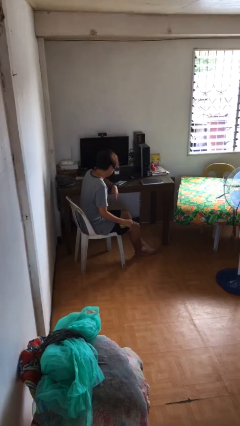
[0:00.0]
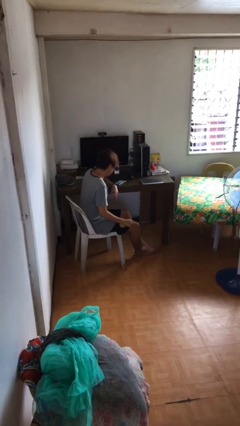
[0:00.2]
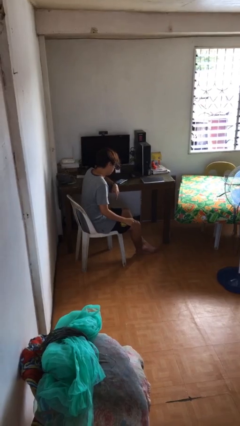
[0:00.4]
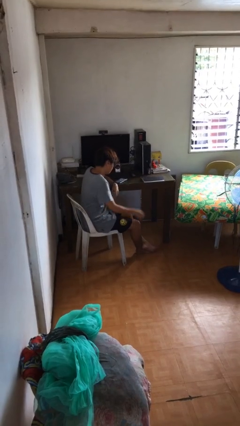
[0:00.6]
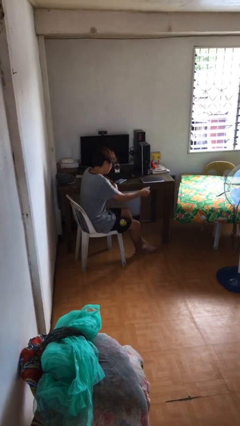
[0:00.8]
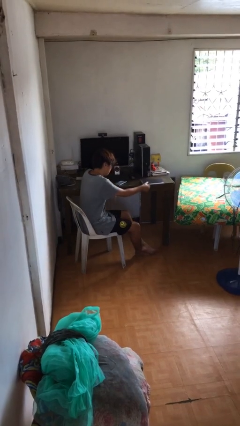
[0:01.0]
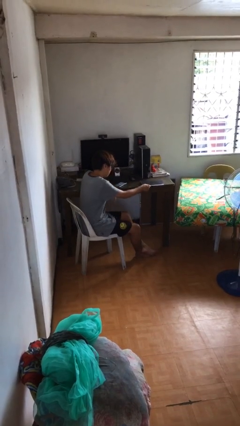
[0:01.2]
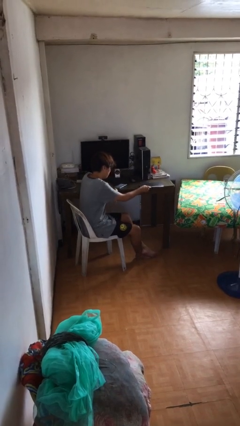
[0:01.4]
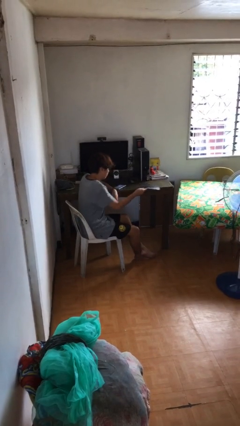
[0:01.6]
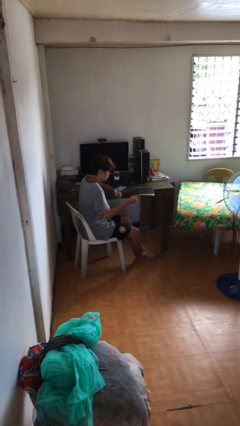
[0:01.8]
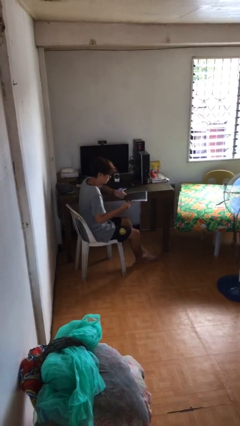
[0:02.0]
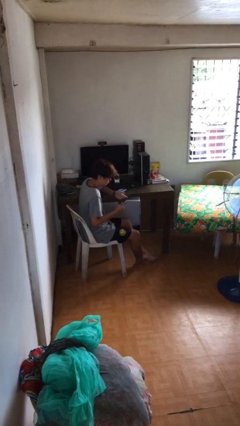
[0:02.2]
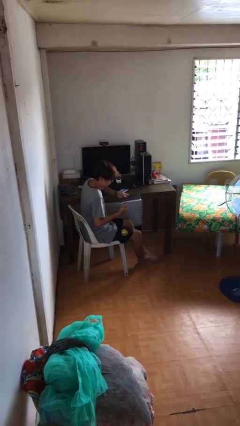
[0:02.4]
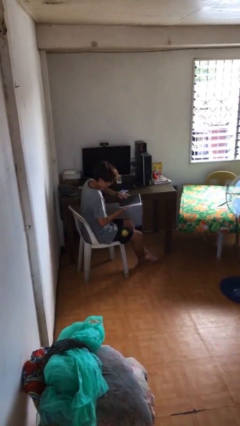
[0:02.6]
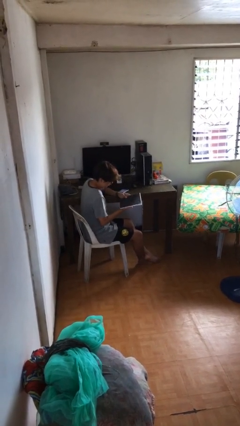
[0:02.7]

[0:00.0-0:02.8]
person picks up object from table

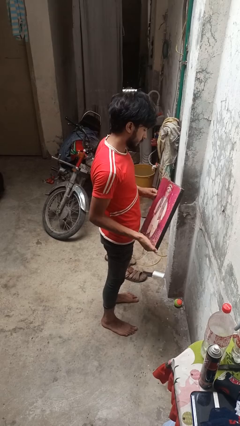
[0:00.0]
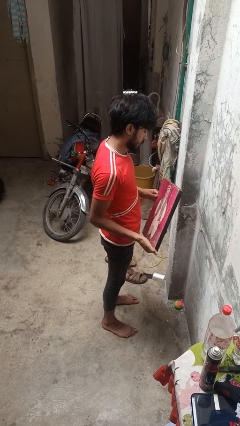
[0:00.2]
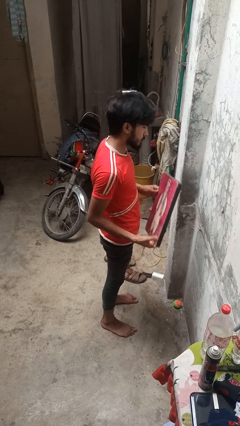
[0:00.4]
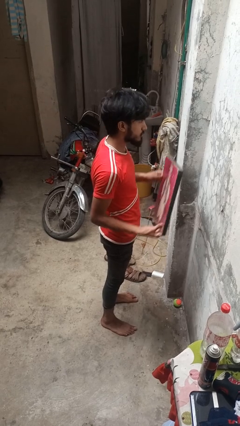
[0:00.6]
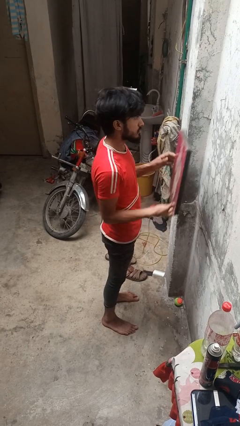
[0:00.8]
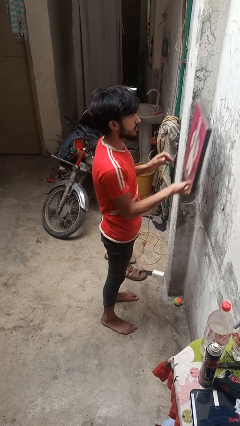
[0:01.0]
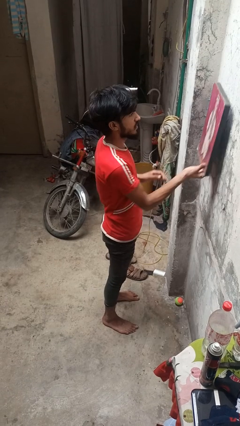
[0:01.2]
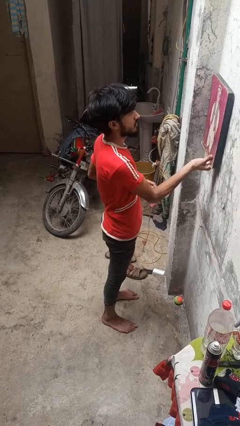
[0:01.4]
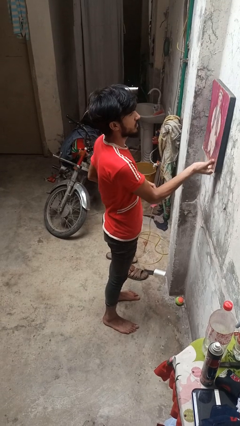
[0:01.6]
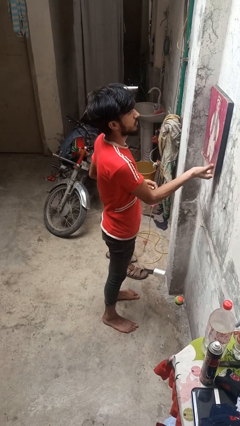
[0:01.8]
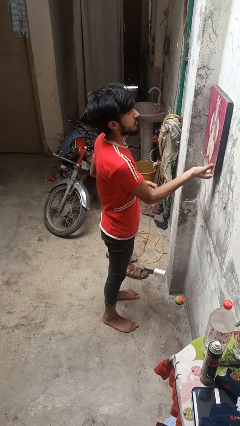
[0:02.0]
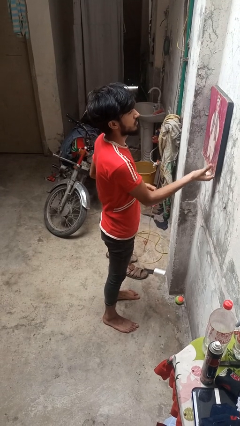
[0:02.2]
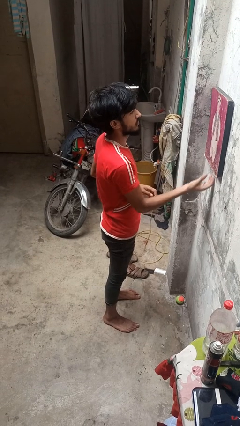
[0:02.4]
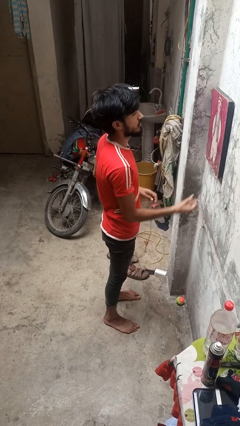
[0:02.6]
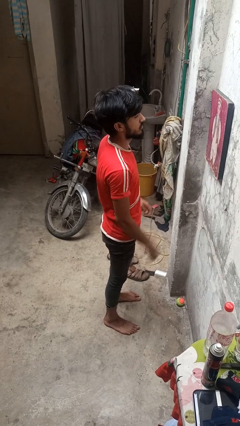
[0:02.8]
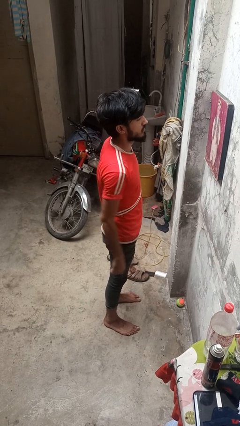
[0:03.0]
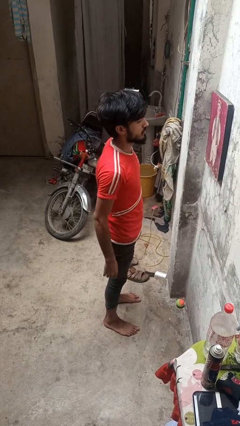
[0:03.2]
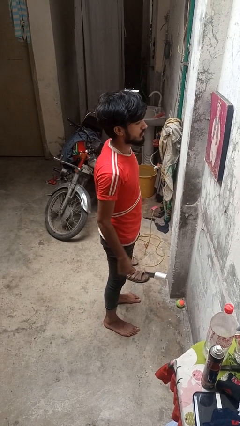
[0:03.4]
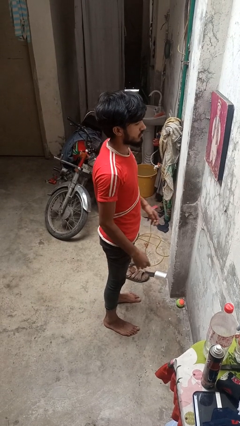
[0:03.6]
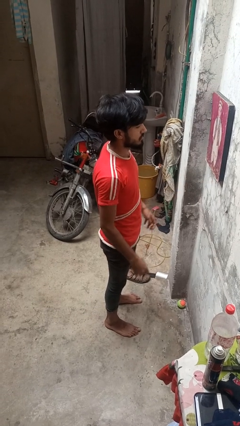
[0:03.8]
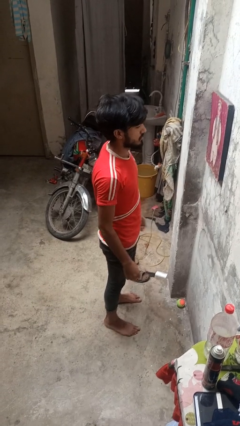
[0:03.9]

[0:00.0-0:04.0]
person puts up picture frame

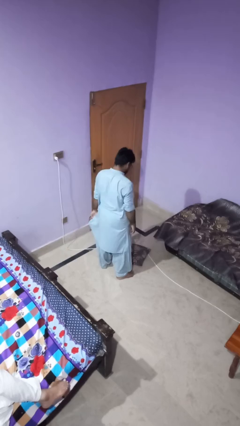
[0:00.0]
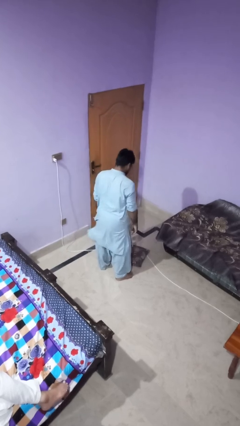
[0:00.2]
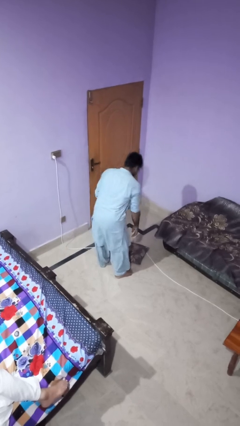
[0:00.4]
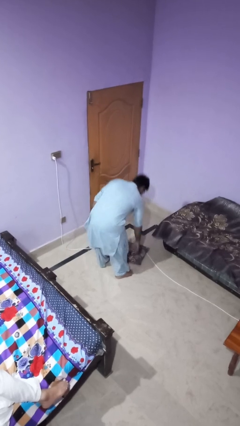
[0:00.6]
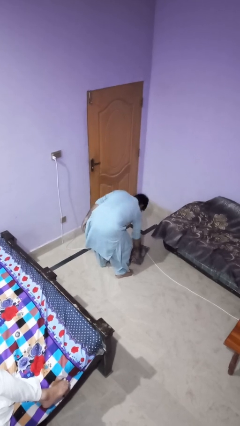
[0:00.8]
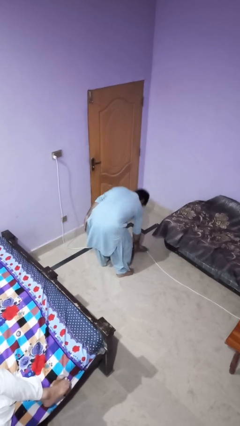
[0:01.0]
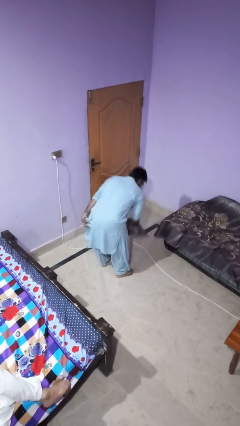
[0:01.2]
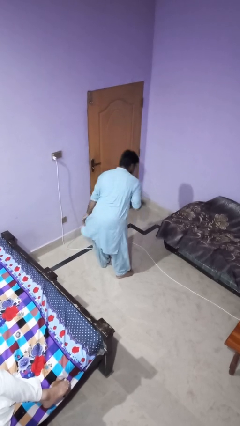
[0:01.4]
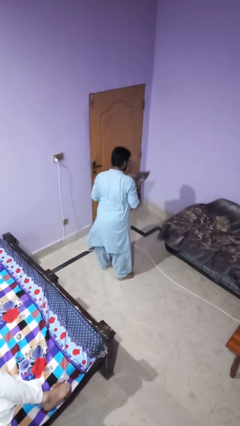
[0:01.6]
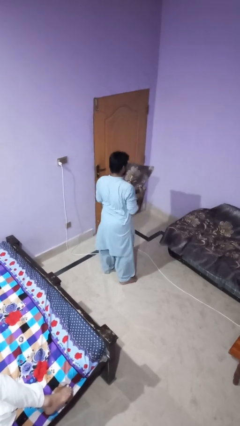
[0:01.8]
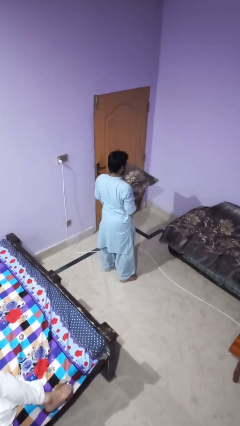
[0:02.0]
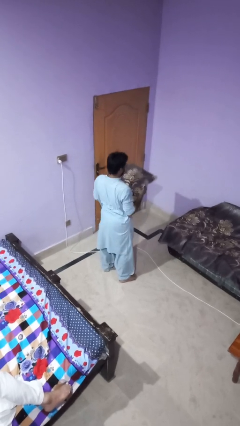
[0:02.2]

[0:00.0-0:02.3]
person picks up object from floor

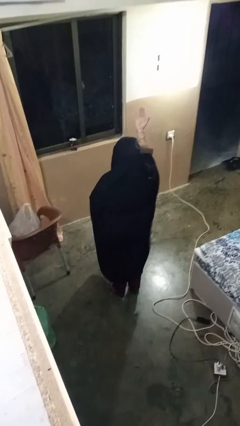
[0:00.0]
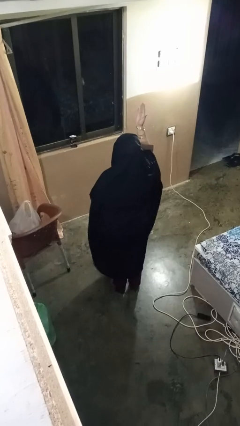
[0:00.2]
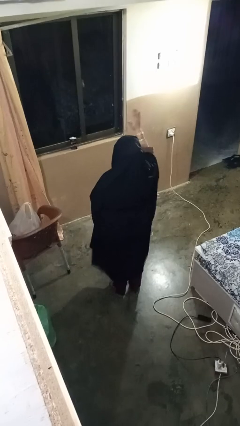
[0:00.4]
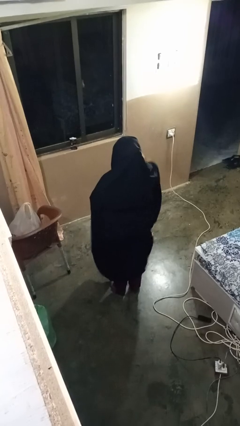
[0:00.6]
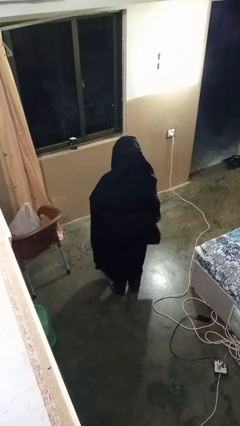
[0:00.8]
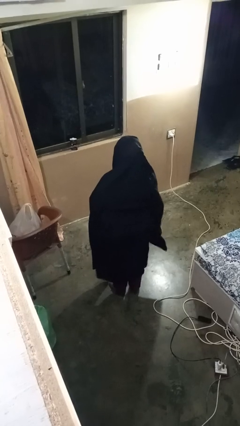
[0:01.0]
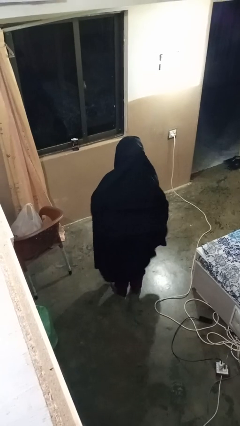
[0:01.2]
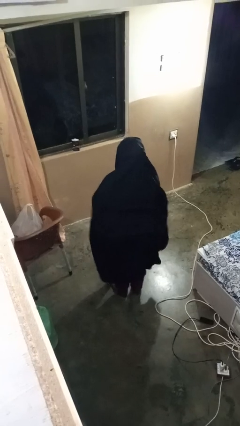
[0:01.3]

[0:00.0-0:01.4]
person gestures swipe down

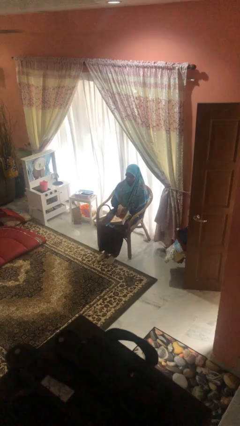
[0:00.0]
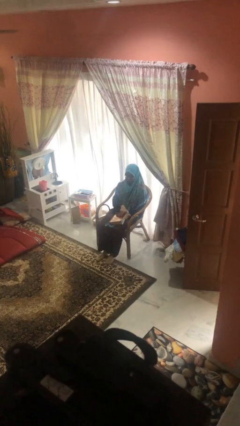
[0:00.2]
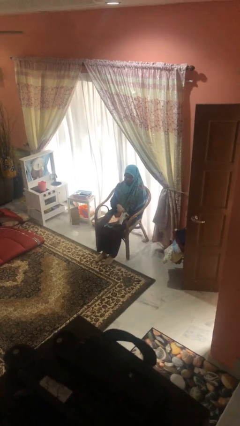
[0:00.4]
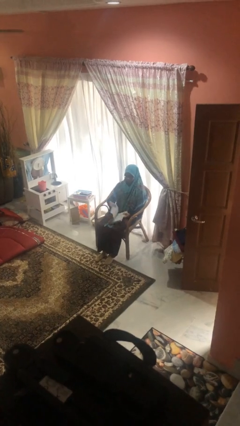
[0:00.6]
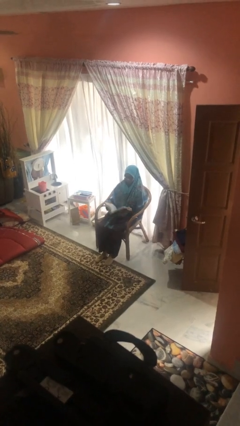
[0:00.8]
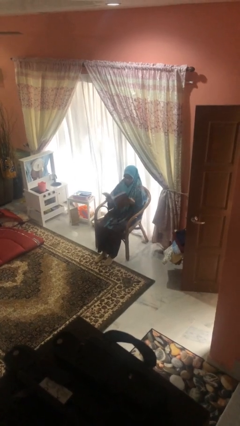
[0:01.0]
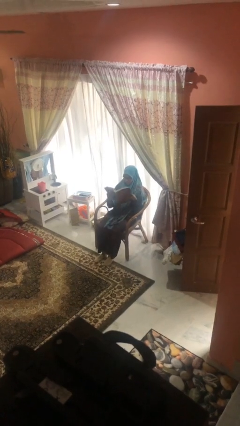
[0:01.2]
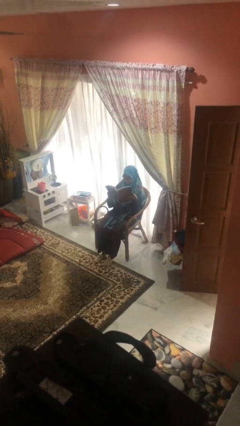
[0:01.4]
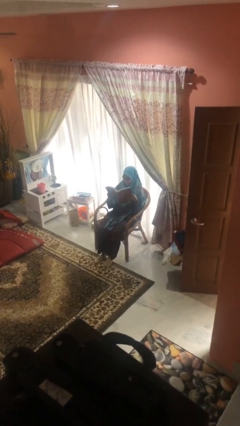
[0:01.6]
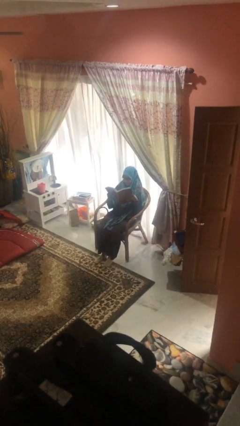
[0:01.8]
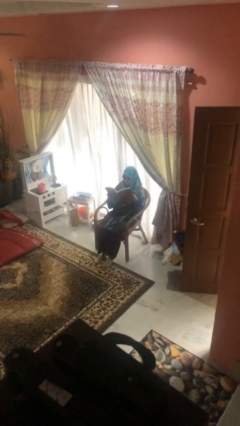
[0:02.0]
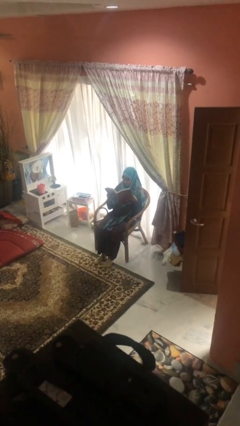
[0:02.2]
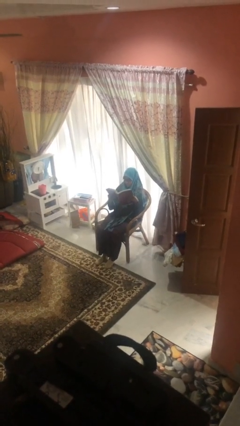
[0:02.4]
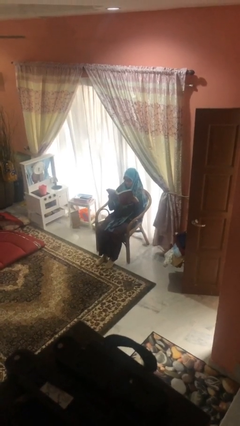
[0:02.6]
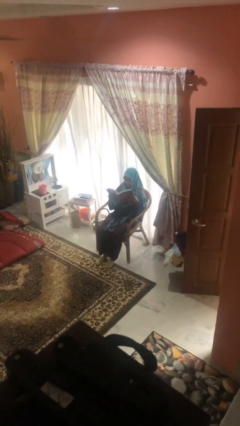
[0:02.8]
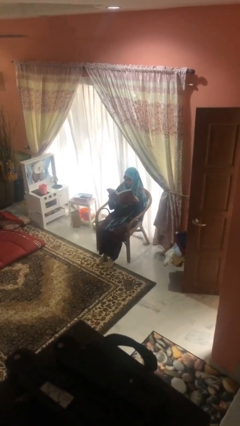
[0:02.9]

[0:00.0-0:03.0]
person reads document

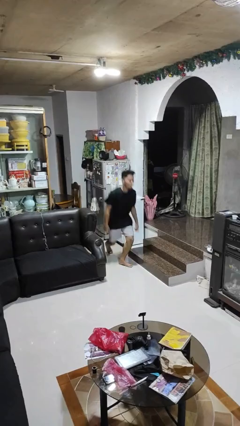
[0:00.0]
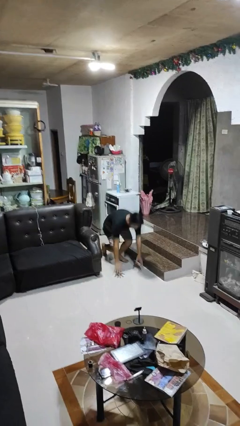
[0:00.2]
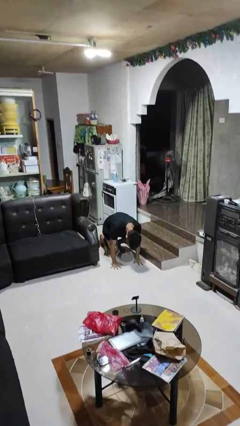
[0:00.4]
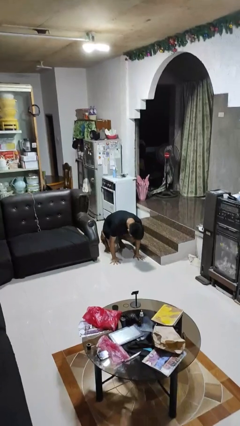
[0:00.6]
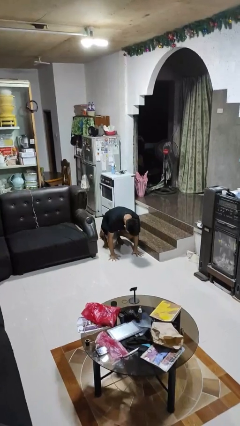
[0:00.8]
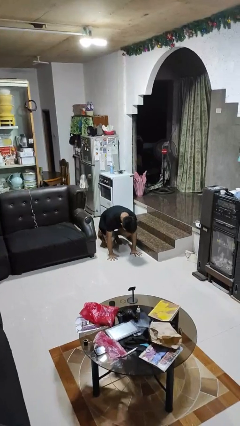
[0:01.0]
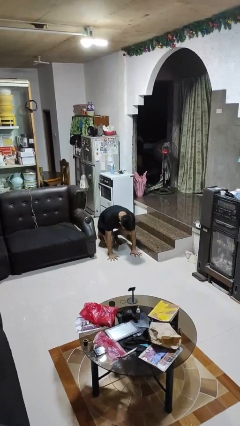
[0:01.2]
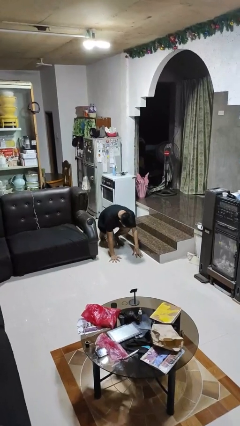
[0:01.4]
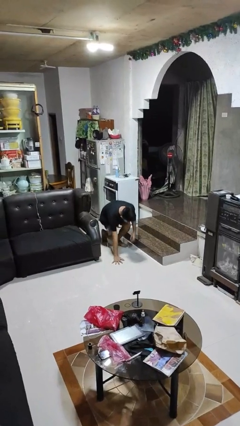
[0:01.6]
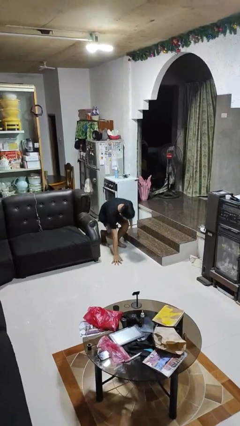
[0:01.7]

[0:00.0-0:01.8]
person trips on object on floor

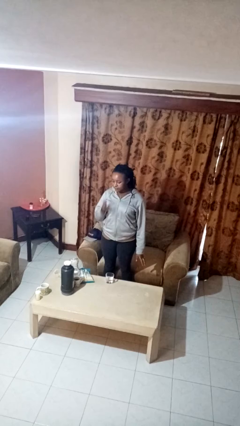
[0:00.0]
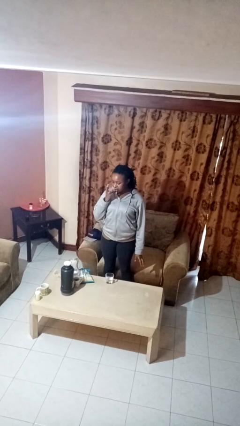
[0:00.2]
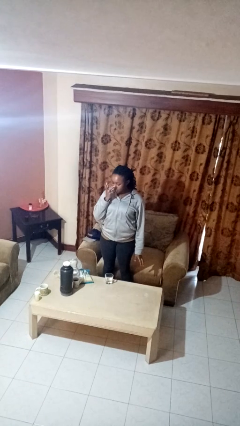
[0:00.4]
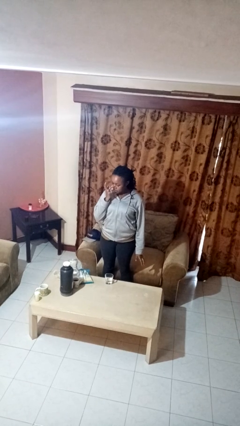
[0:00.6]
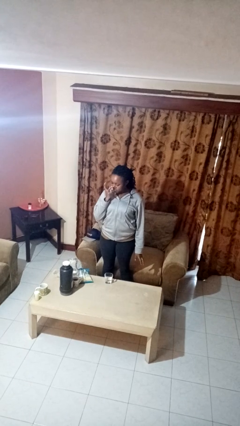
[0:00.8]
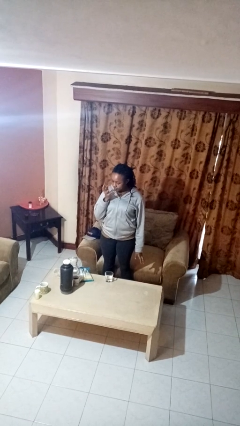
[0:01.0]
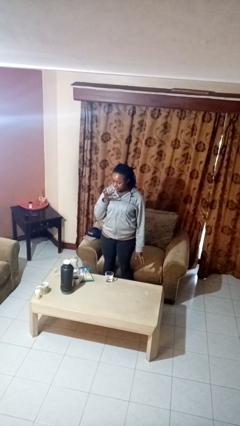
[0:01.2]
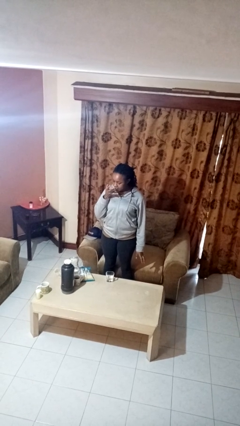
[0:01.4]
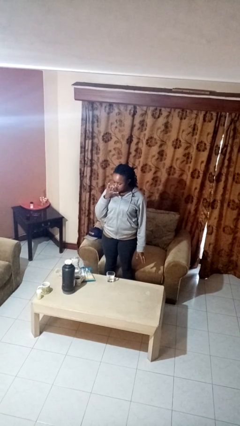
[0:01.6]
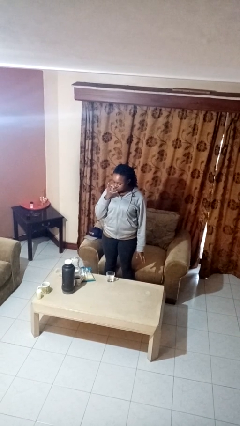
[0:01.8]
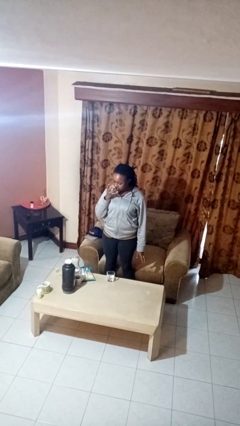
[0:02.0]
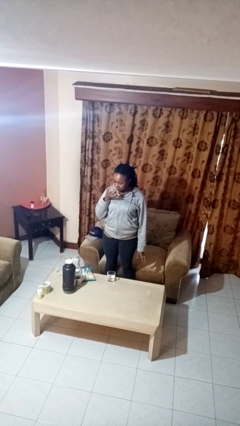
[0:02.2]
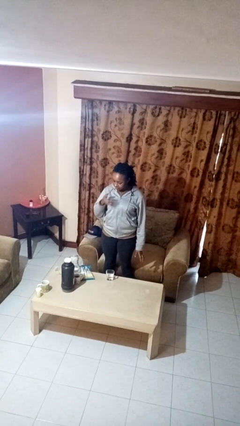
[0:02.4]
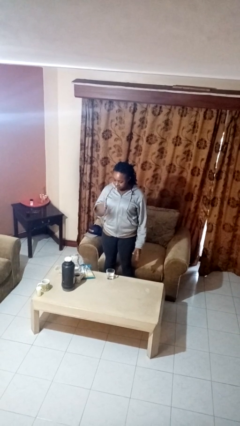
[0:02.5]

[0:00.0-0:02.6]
person licks fingers
